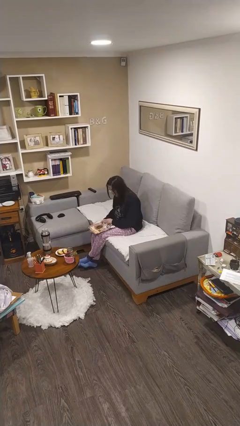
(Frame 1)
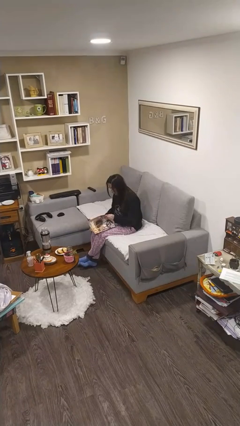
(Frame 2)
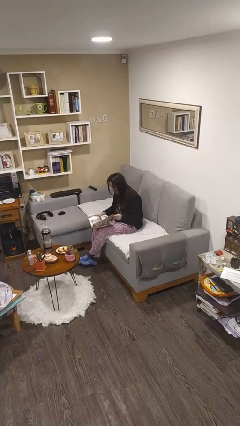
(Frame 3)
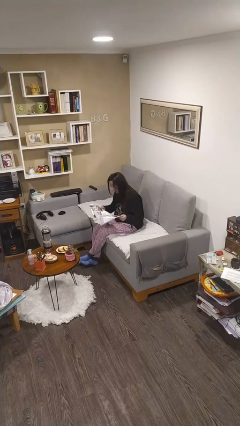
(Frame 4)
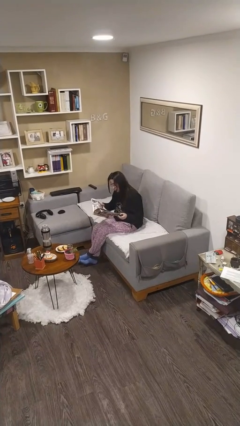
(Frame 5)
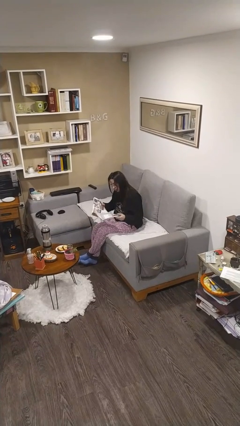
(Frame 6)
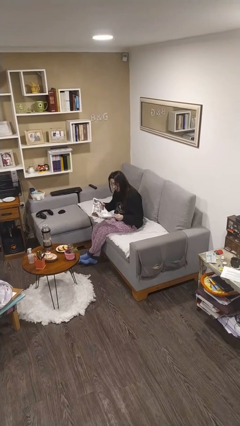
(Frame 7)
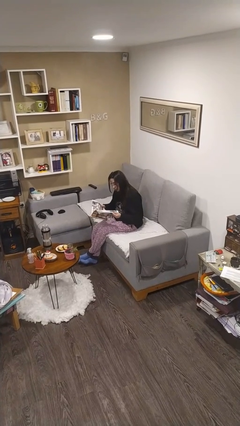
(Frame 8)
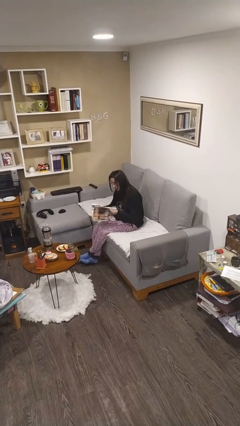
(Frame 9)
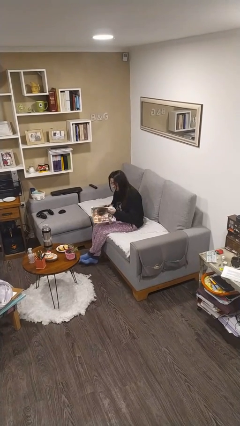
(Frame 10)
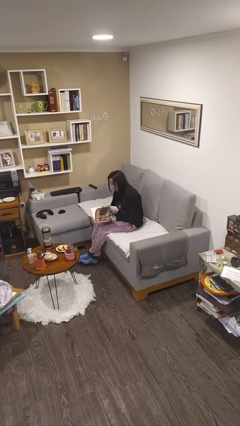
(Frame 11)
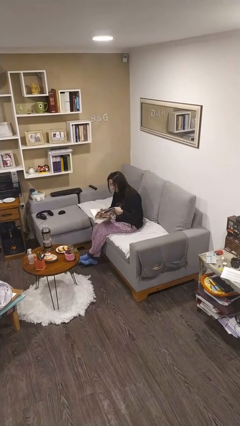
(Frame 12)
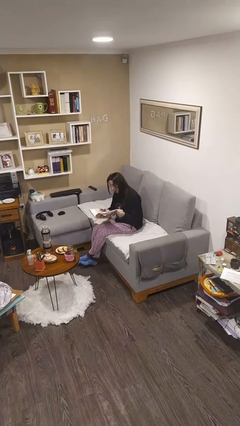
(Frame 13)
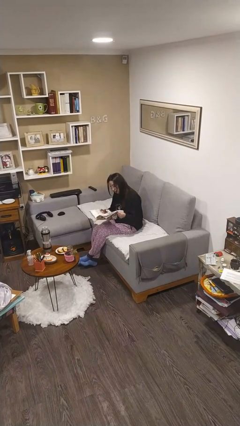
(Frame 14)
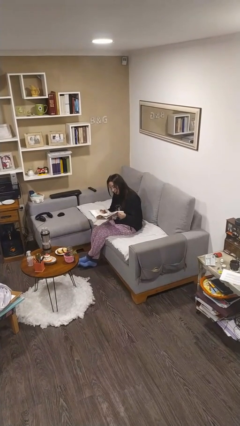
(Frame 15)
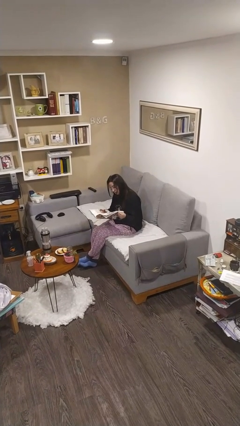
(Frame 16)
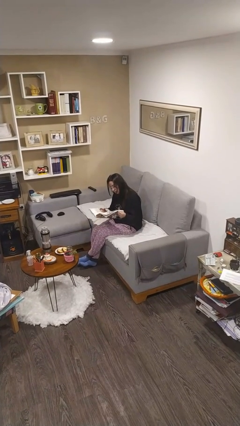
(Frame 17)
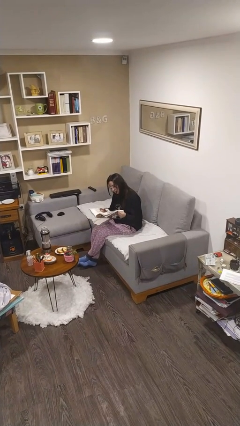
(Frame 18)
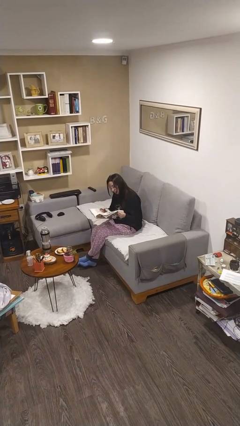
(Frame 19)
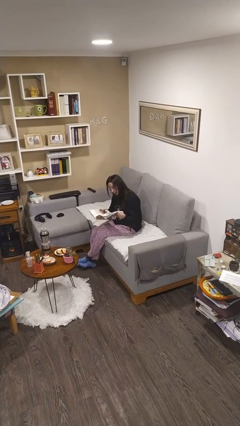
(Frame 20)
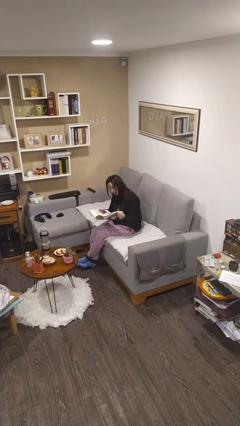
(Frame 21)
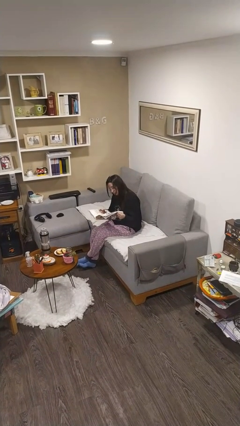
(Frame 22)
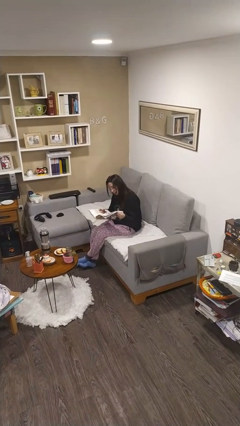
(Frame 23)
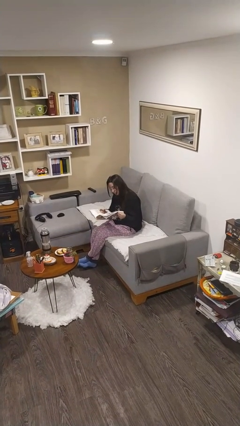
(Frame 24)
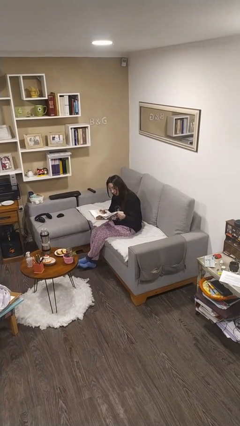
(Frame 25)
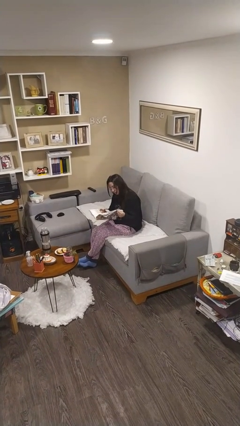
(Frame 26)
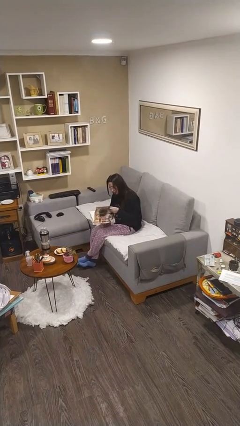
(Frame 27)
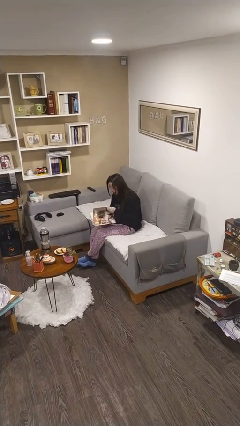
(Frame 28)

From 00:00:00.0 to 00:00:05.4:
person reads magazine

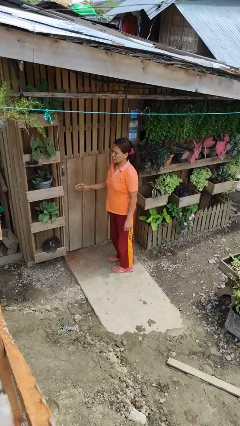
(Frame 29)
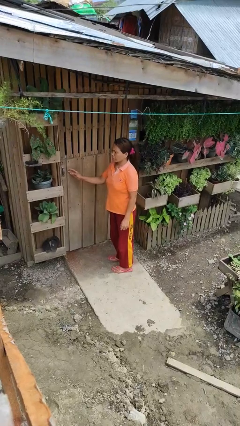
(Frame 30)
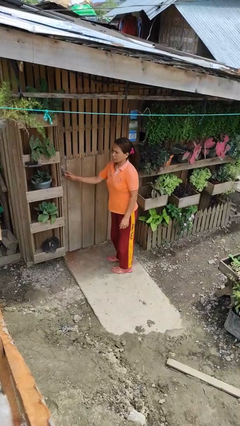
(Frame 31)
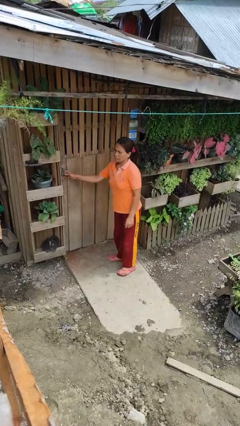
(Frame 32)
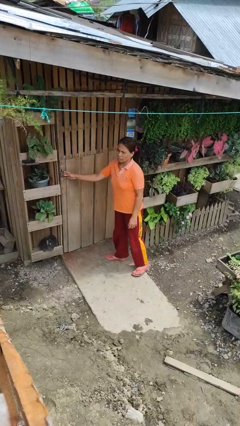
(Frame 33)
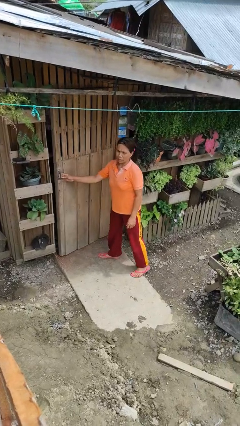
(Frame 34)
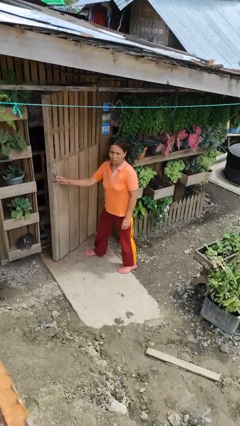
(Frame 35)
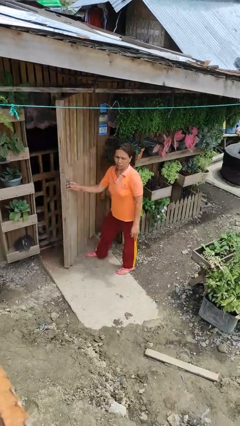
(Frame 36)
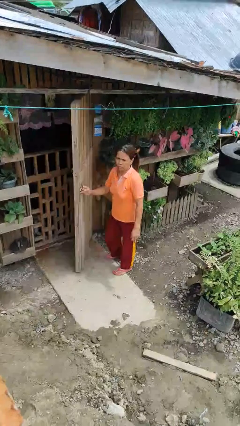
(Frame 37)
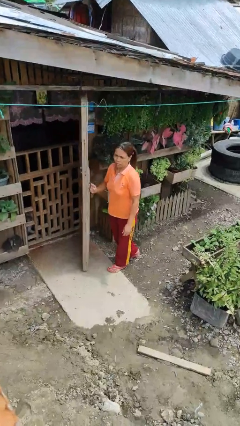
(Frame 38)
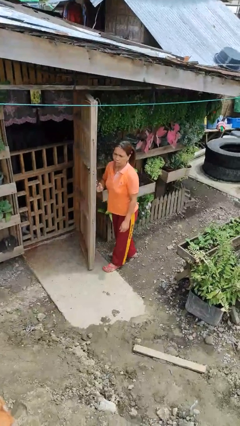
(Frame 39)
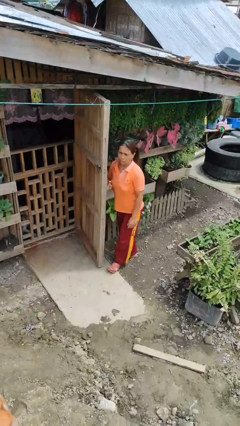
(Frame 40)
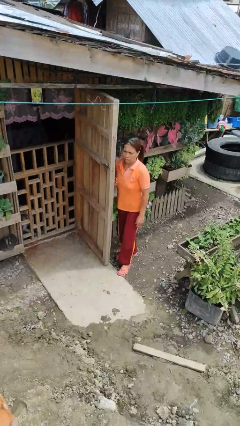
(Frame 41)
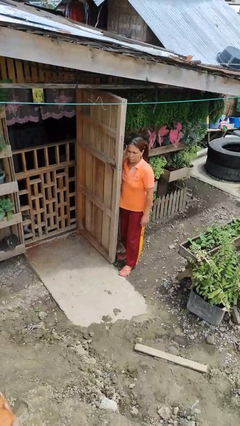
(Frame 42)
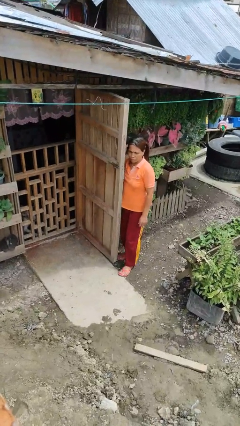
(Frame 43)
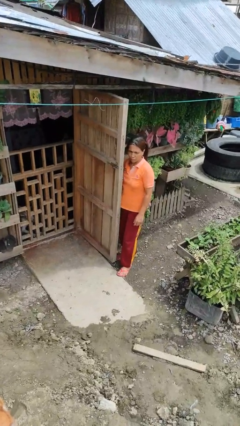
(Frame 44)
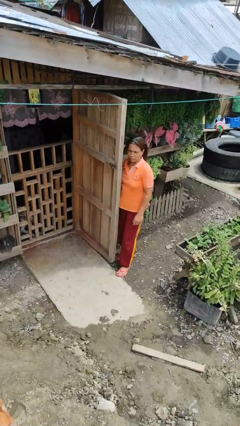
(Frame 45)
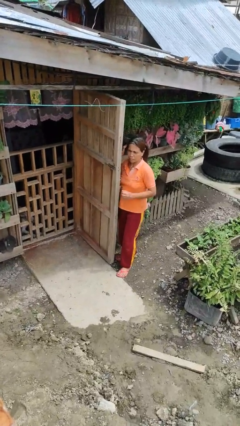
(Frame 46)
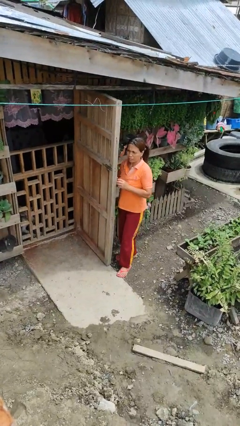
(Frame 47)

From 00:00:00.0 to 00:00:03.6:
person opens facility door

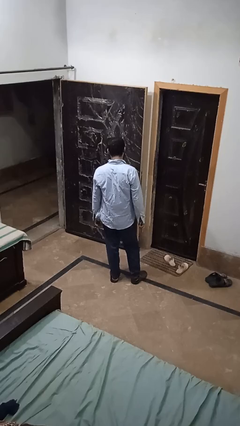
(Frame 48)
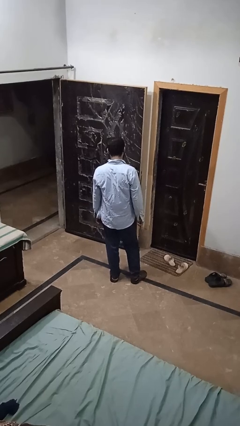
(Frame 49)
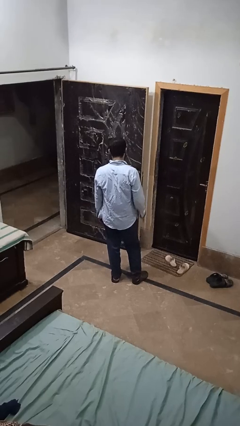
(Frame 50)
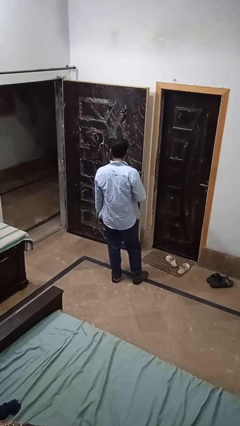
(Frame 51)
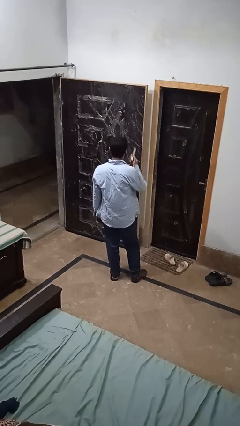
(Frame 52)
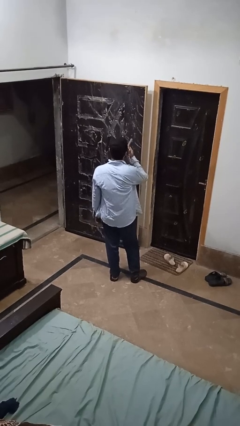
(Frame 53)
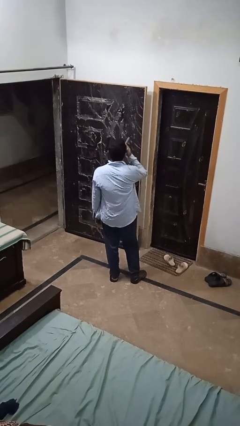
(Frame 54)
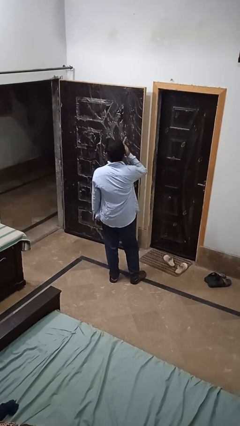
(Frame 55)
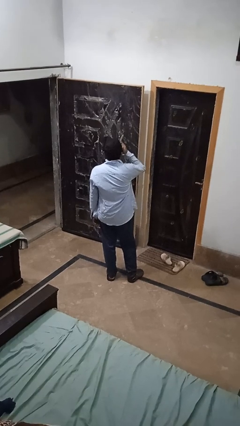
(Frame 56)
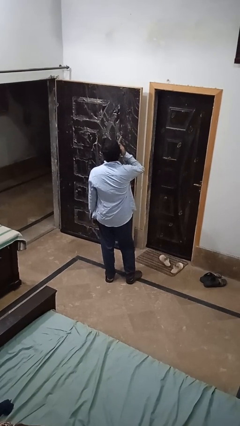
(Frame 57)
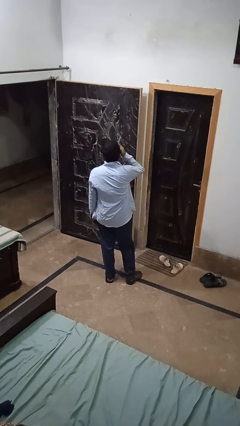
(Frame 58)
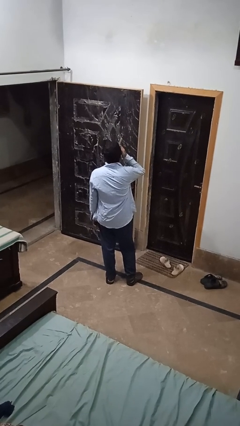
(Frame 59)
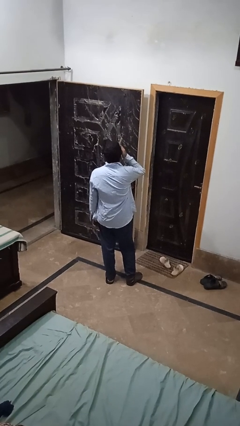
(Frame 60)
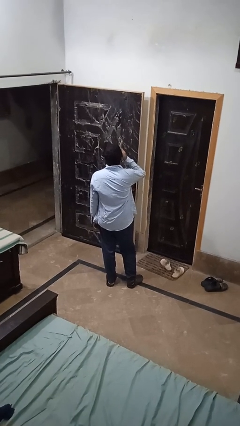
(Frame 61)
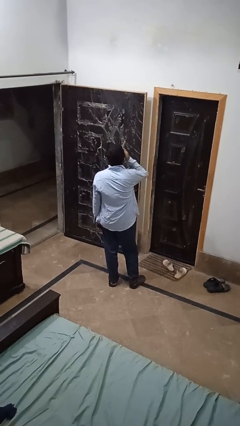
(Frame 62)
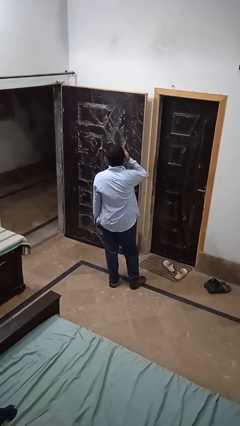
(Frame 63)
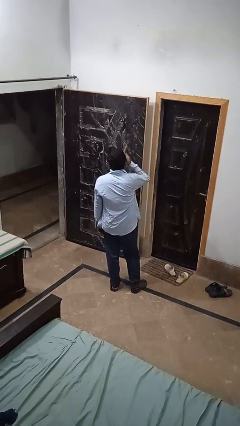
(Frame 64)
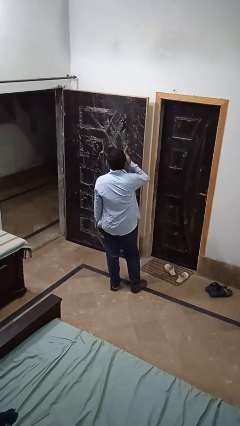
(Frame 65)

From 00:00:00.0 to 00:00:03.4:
person vapes

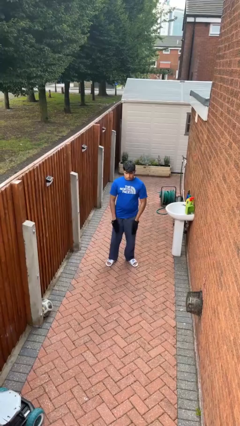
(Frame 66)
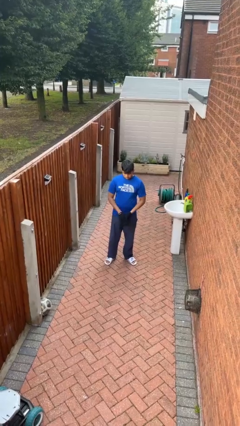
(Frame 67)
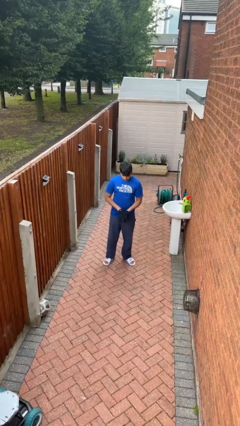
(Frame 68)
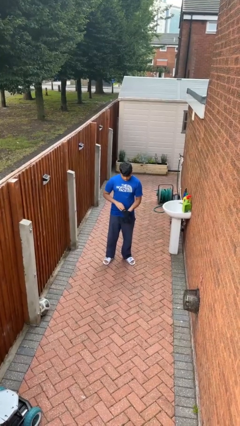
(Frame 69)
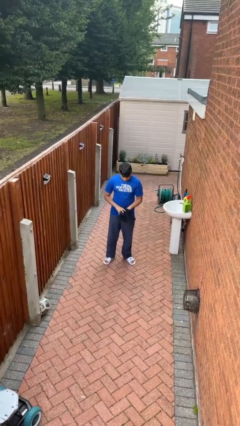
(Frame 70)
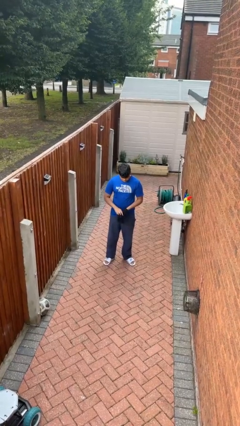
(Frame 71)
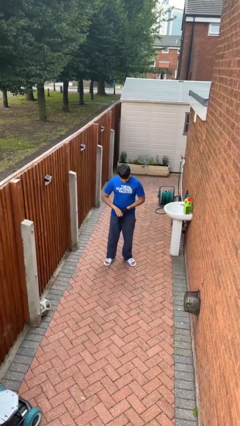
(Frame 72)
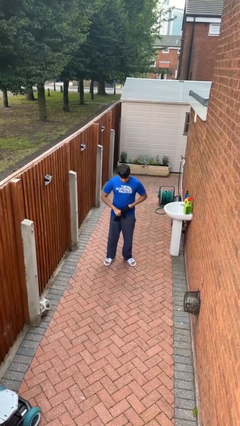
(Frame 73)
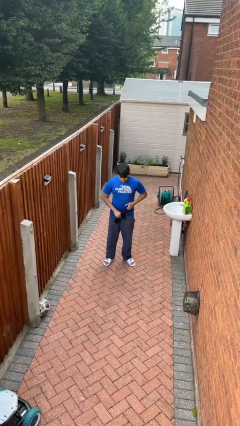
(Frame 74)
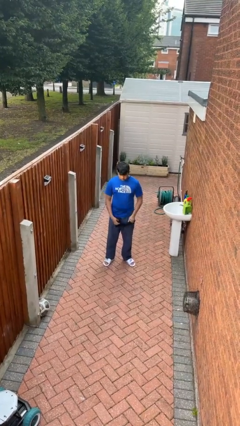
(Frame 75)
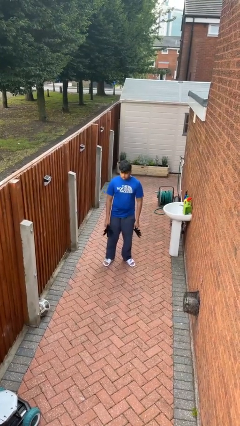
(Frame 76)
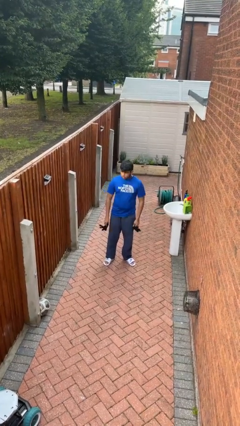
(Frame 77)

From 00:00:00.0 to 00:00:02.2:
person takes off gloves

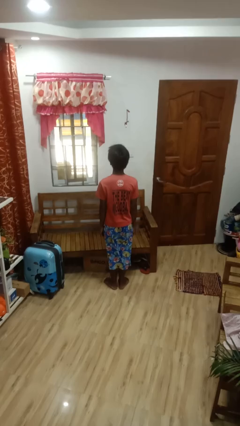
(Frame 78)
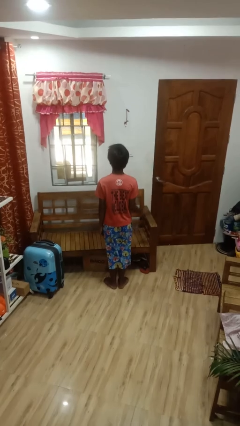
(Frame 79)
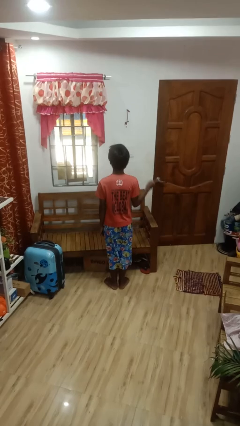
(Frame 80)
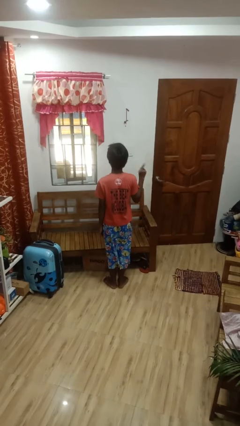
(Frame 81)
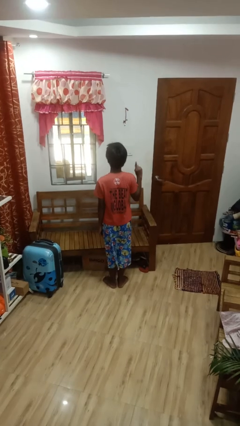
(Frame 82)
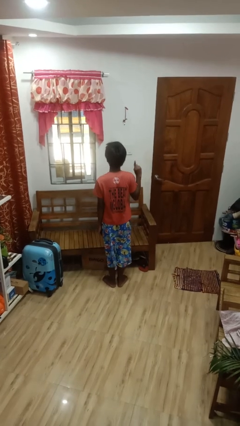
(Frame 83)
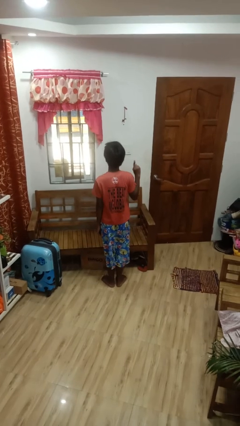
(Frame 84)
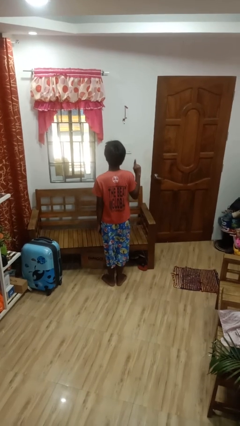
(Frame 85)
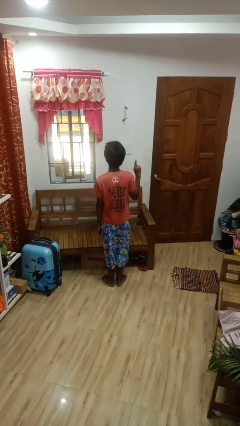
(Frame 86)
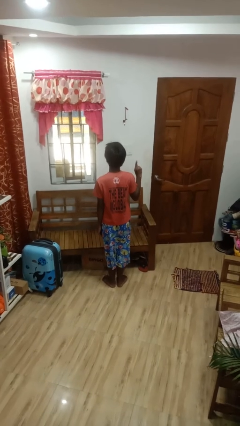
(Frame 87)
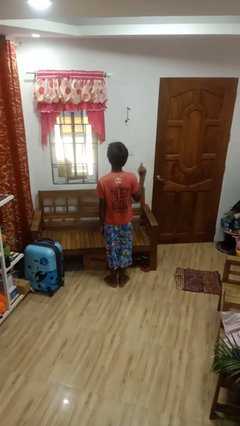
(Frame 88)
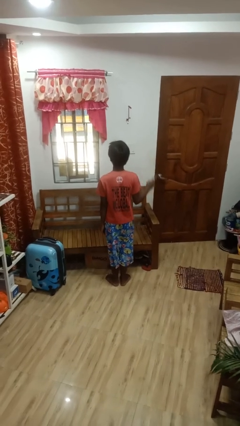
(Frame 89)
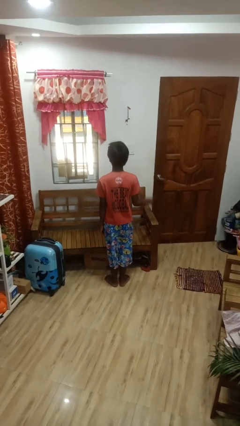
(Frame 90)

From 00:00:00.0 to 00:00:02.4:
person gestures number one

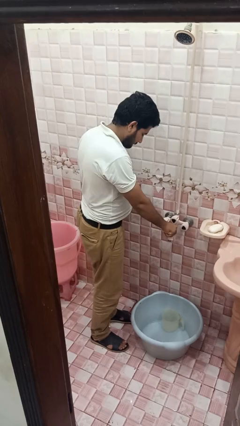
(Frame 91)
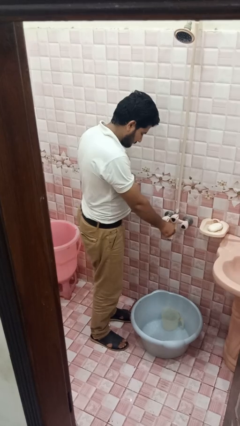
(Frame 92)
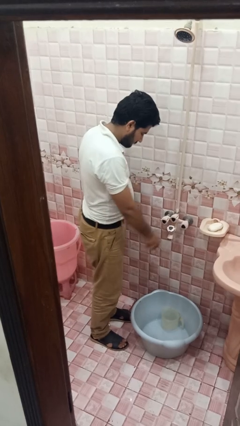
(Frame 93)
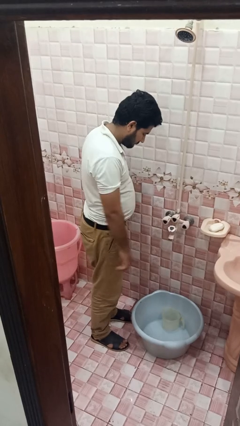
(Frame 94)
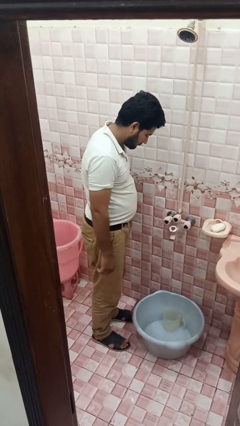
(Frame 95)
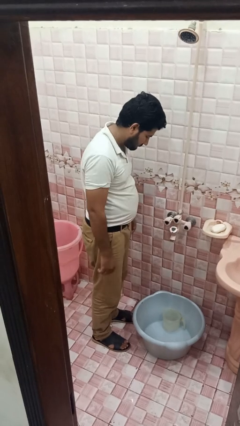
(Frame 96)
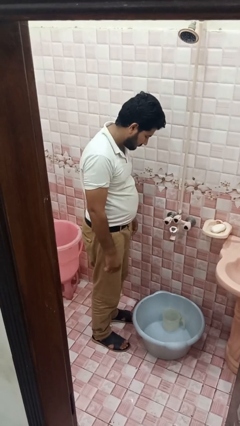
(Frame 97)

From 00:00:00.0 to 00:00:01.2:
person turns off faucet
